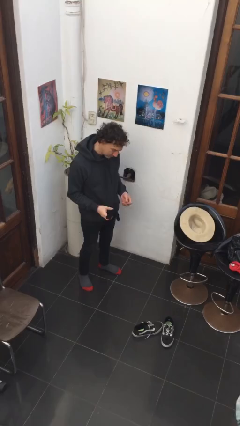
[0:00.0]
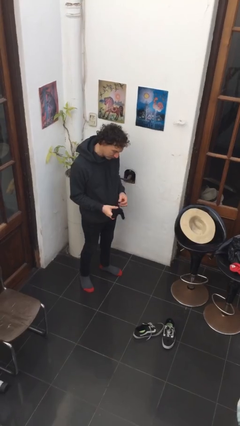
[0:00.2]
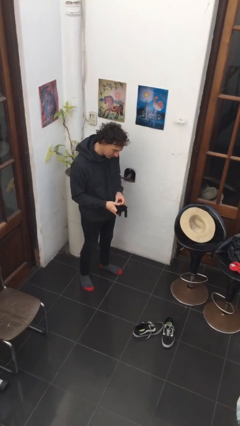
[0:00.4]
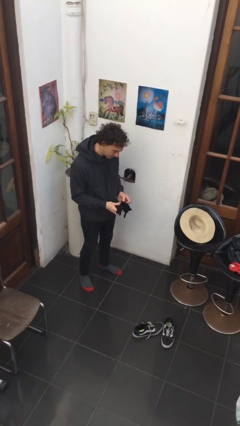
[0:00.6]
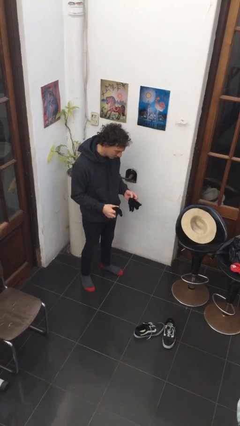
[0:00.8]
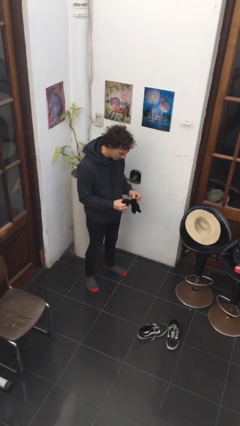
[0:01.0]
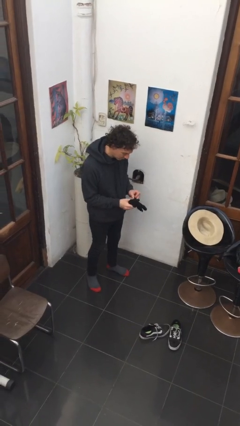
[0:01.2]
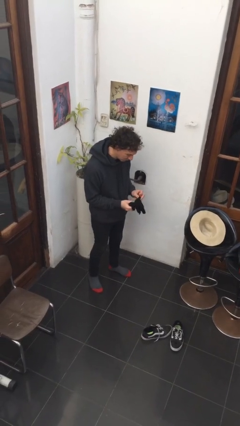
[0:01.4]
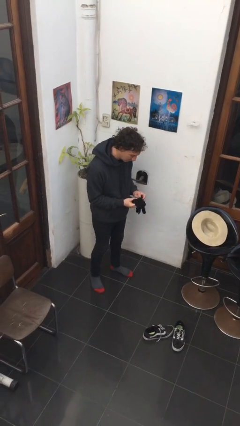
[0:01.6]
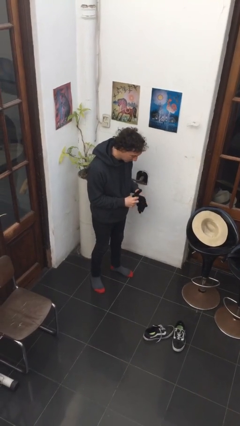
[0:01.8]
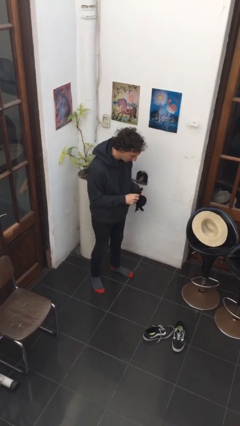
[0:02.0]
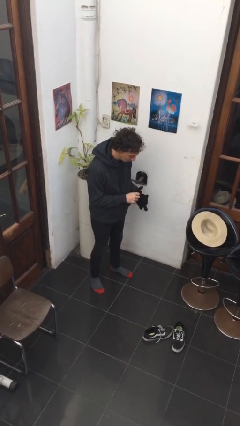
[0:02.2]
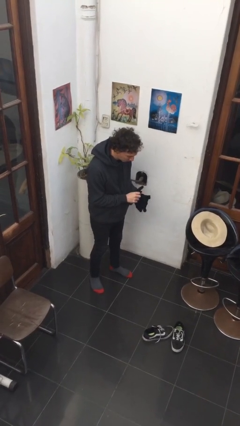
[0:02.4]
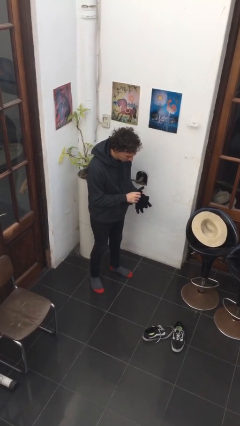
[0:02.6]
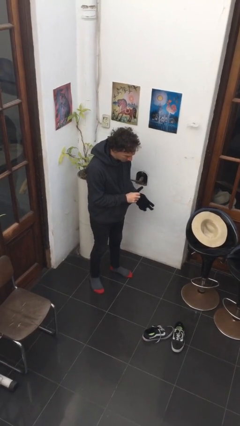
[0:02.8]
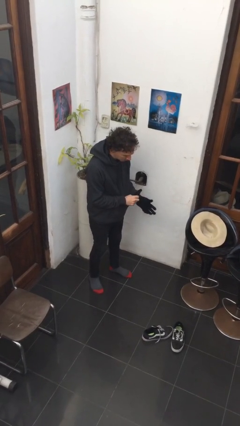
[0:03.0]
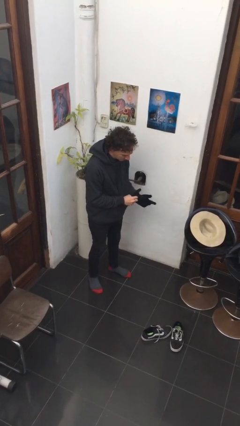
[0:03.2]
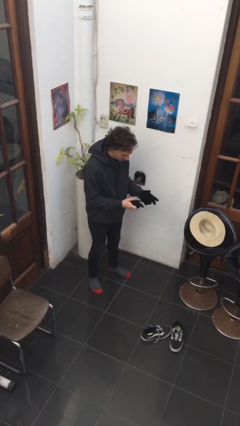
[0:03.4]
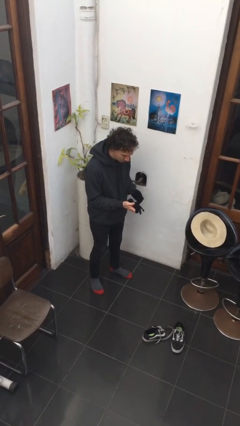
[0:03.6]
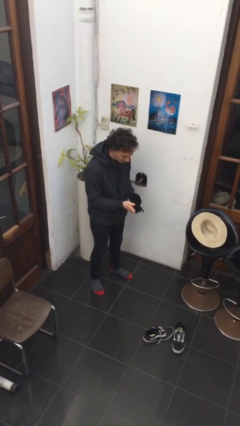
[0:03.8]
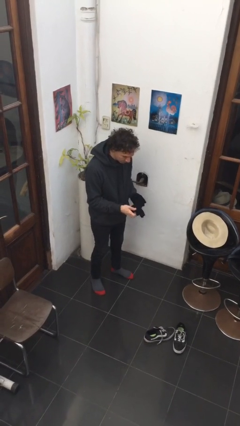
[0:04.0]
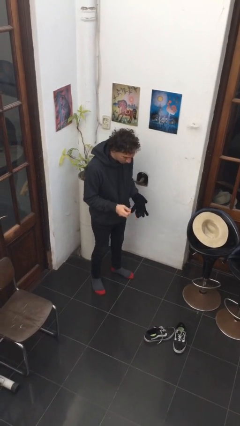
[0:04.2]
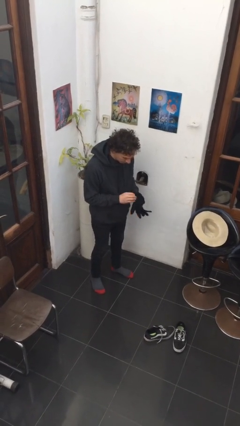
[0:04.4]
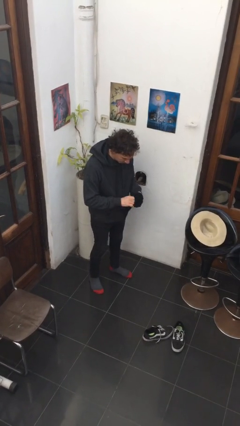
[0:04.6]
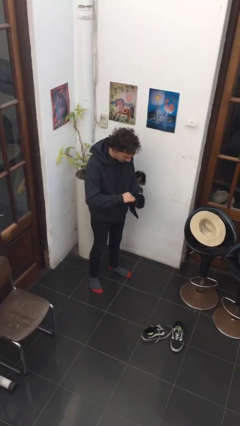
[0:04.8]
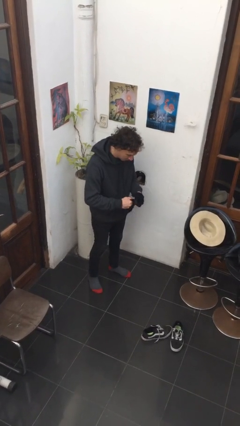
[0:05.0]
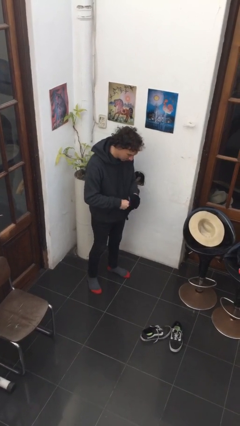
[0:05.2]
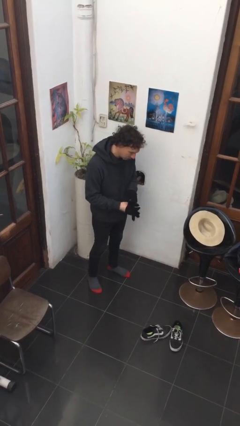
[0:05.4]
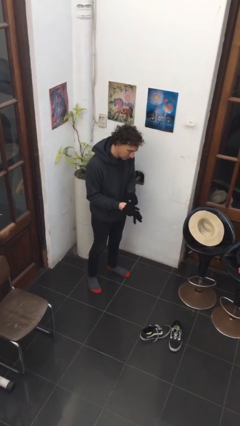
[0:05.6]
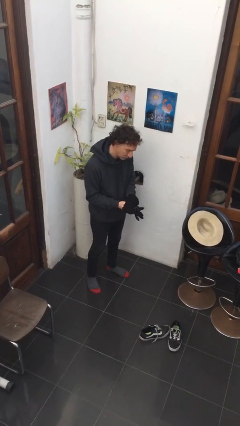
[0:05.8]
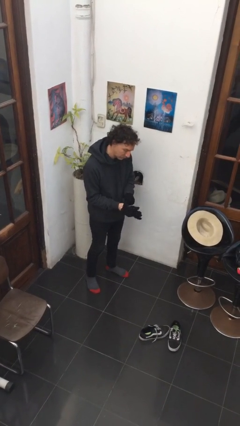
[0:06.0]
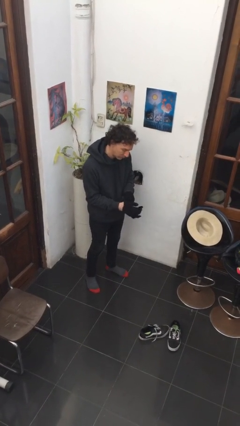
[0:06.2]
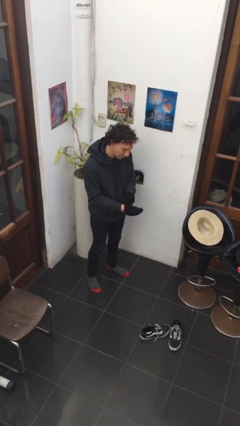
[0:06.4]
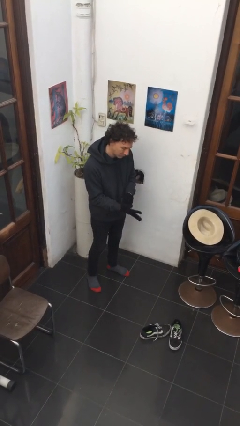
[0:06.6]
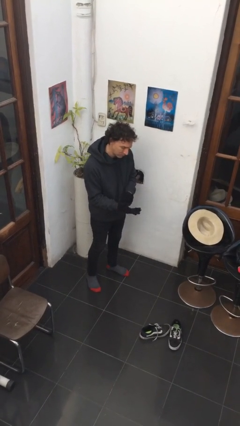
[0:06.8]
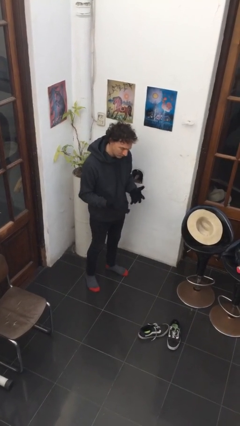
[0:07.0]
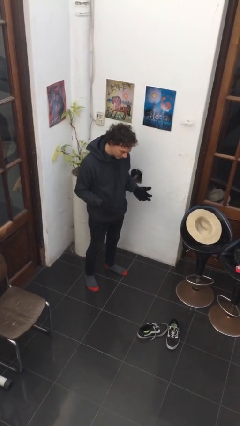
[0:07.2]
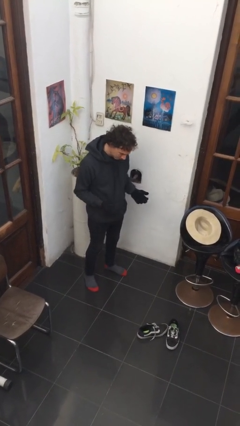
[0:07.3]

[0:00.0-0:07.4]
person puts on gloves

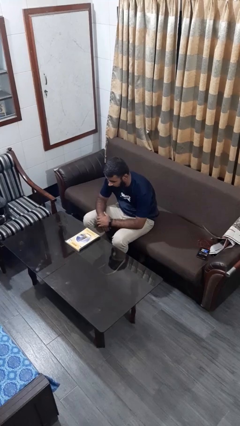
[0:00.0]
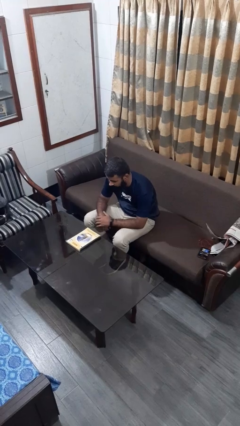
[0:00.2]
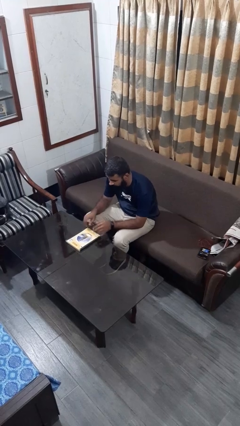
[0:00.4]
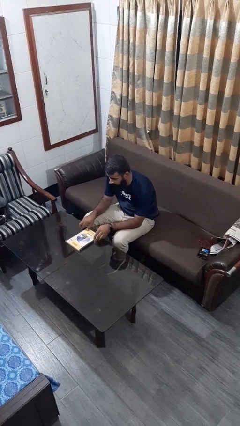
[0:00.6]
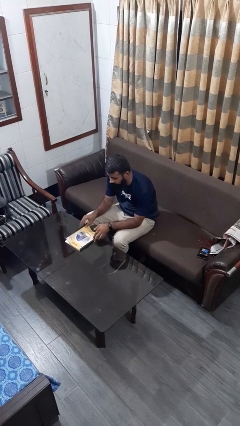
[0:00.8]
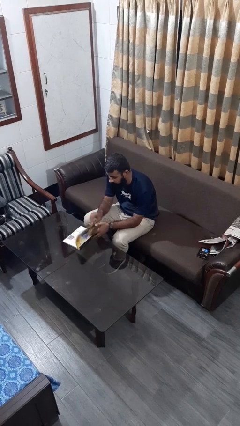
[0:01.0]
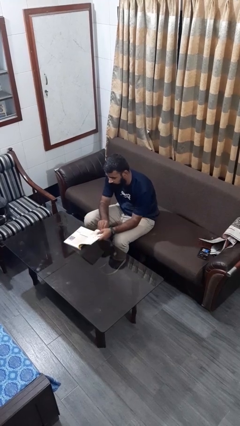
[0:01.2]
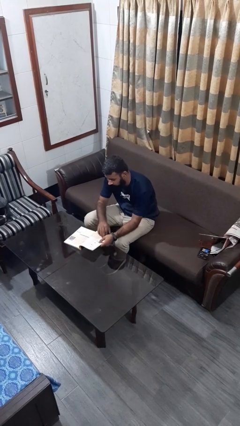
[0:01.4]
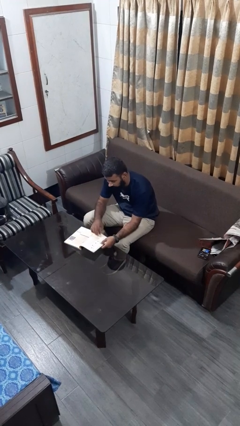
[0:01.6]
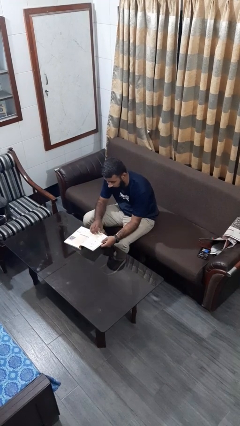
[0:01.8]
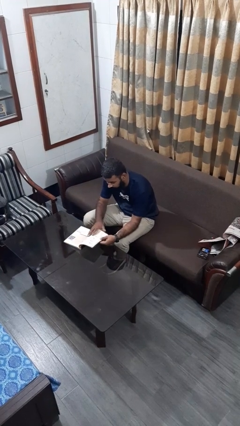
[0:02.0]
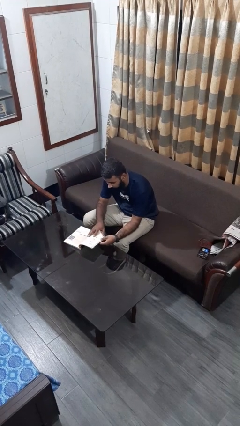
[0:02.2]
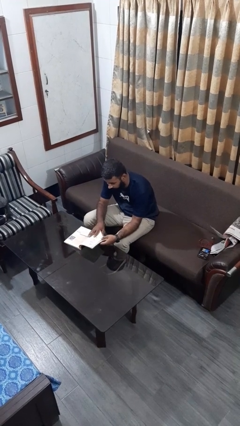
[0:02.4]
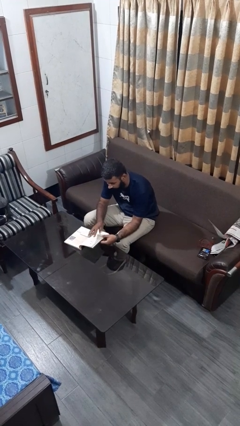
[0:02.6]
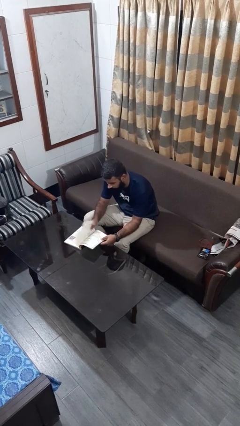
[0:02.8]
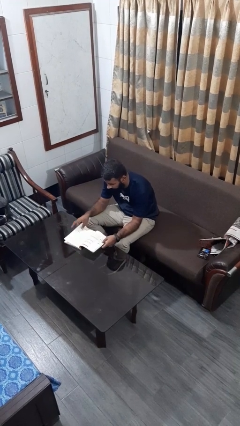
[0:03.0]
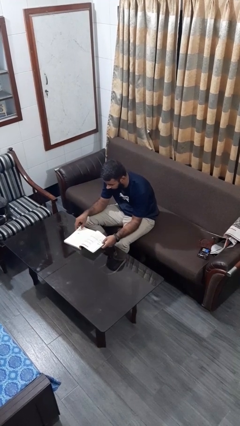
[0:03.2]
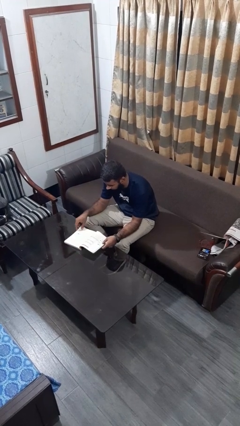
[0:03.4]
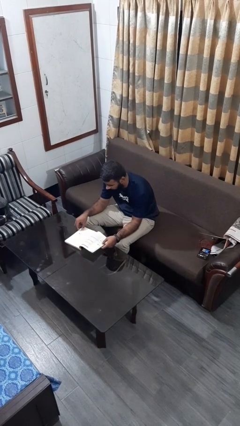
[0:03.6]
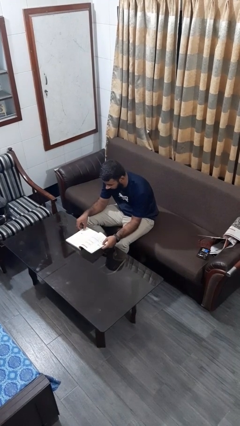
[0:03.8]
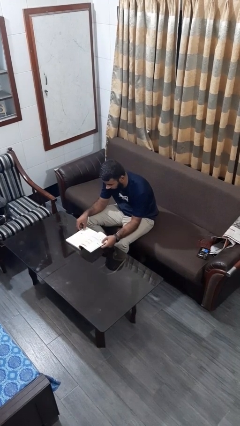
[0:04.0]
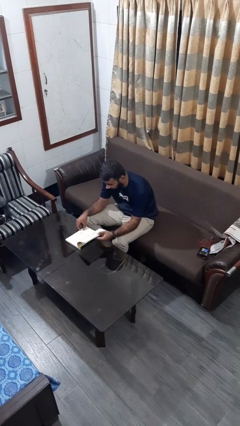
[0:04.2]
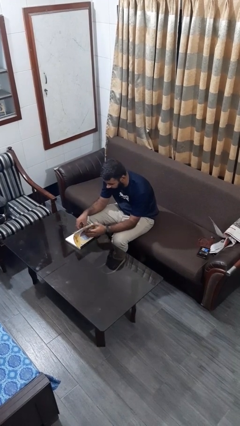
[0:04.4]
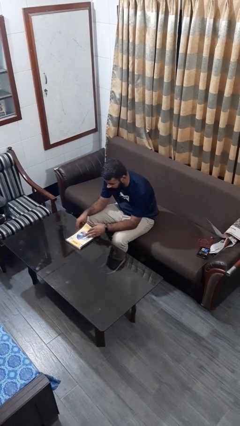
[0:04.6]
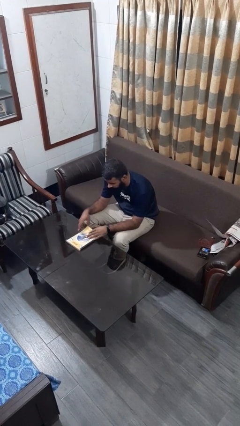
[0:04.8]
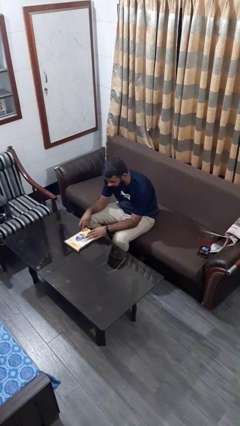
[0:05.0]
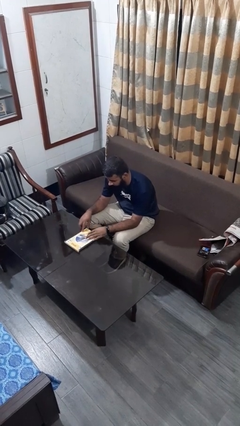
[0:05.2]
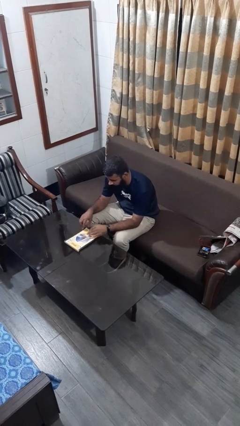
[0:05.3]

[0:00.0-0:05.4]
person reads book

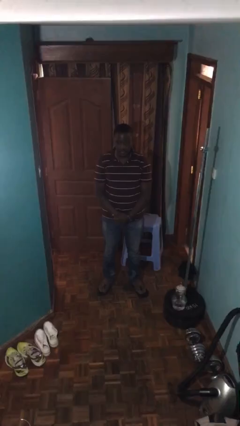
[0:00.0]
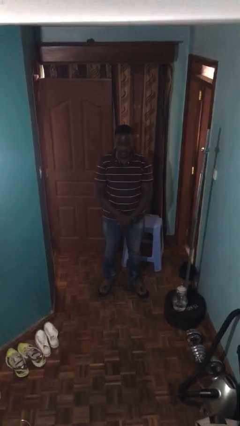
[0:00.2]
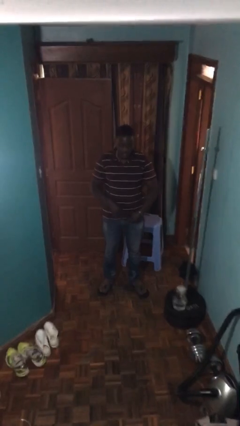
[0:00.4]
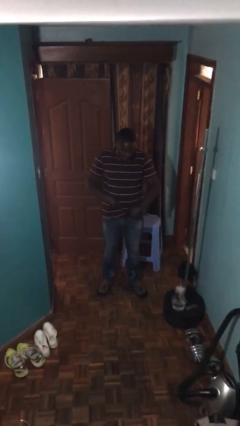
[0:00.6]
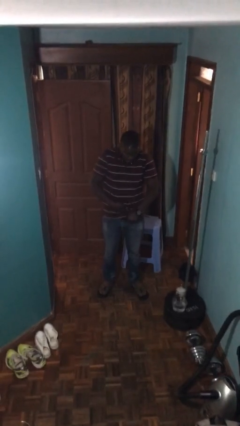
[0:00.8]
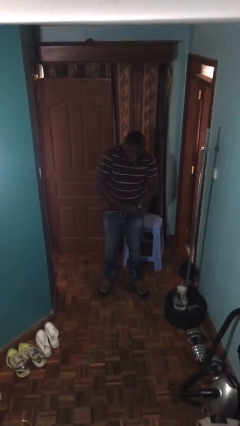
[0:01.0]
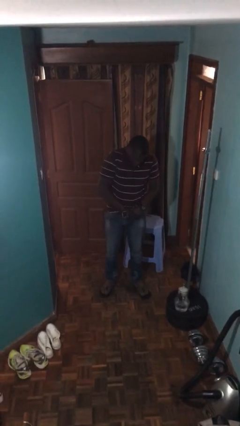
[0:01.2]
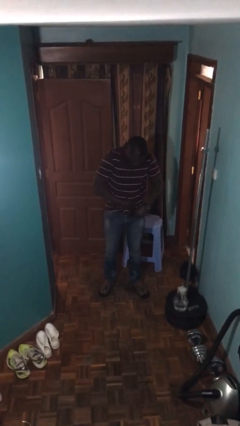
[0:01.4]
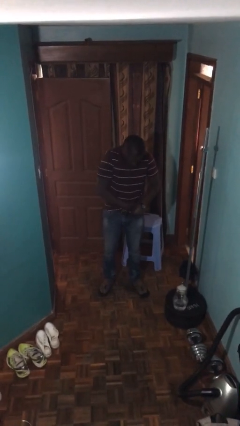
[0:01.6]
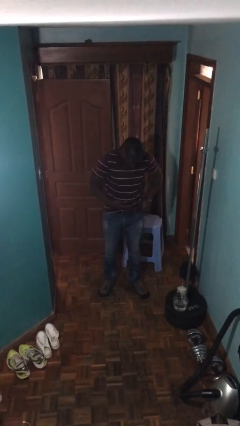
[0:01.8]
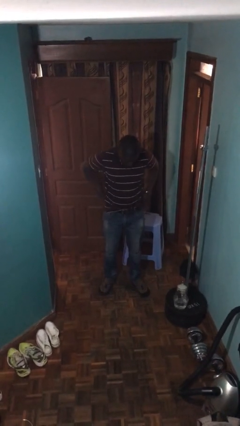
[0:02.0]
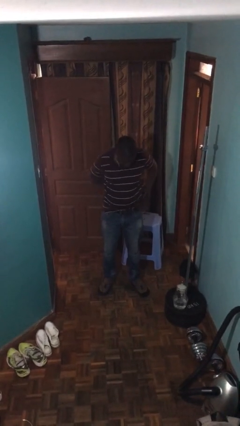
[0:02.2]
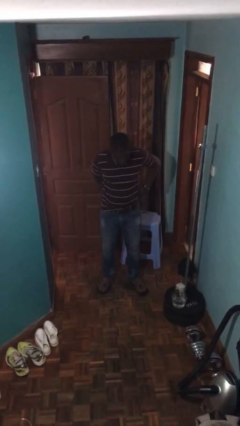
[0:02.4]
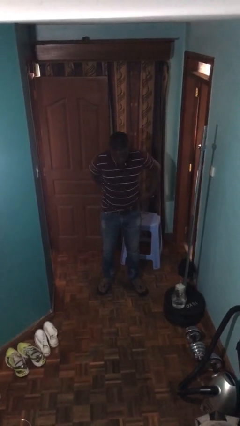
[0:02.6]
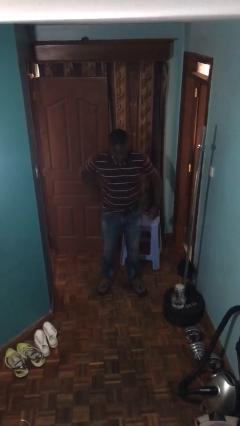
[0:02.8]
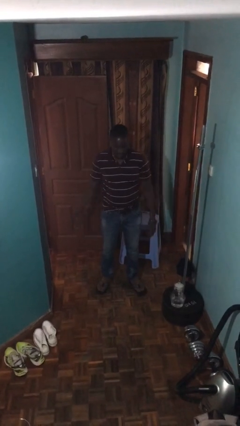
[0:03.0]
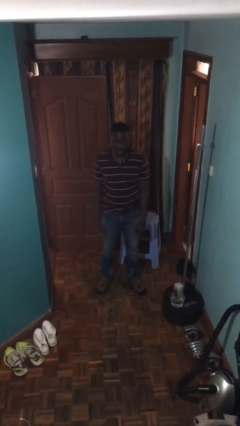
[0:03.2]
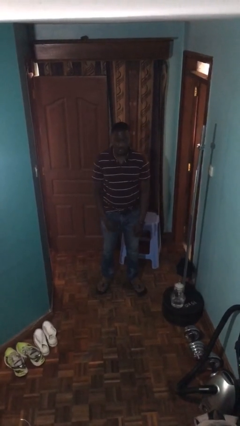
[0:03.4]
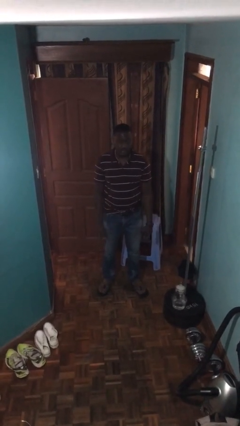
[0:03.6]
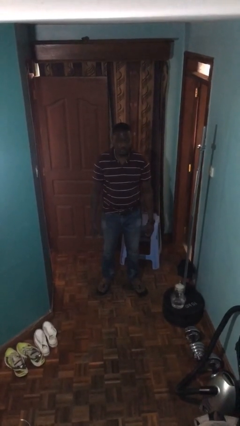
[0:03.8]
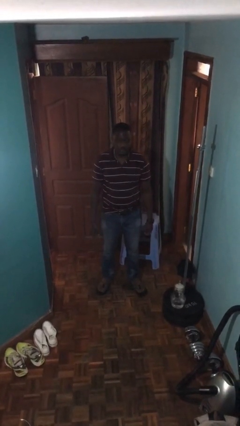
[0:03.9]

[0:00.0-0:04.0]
person tucks in shirt

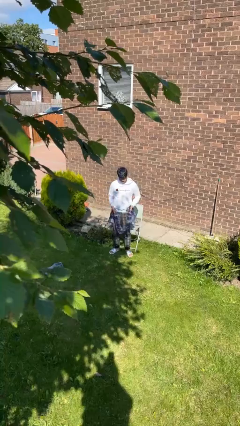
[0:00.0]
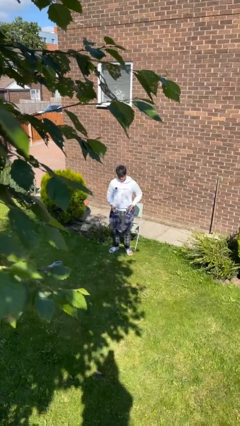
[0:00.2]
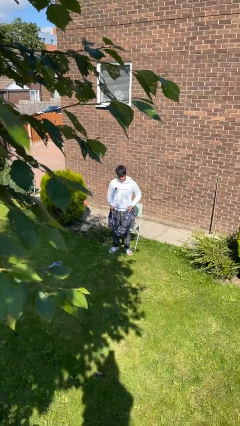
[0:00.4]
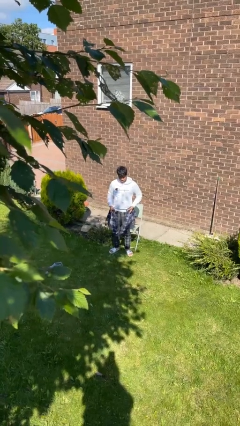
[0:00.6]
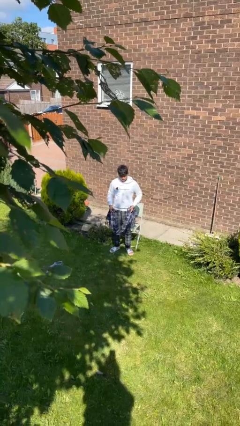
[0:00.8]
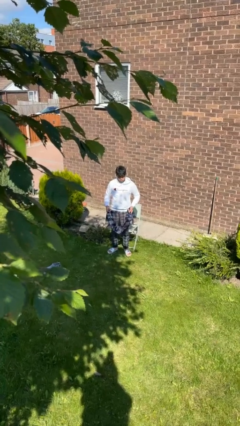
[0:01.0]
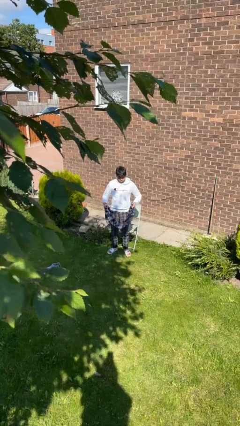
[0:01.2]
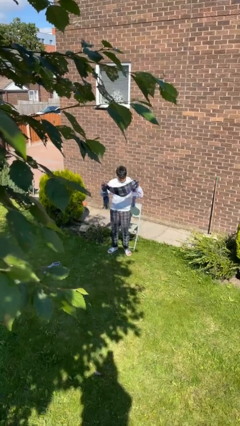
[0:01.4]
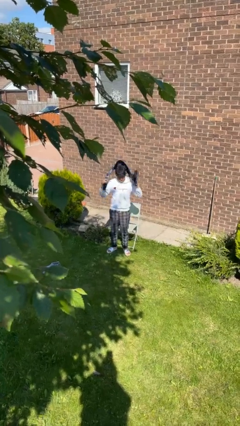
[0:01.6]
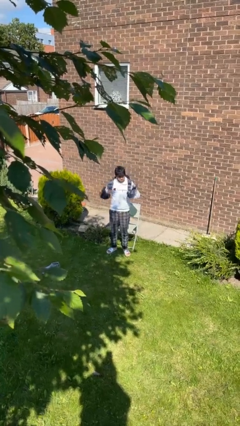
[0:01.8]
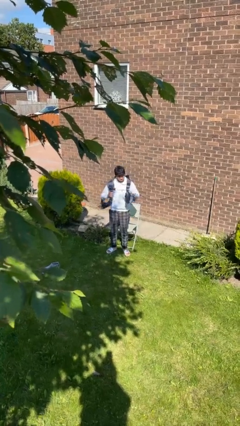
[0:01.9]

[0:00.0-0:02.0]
person puts on scarf
